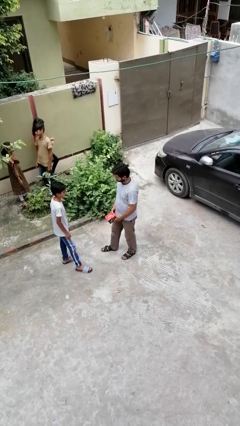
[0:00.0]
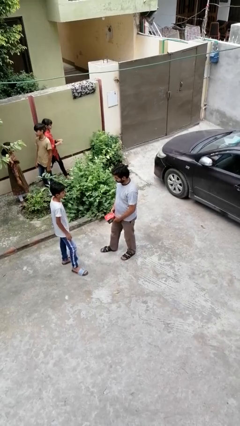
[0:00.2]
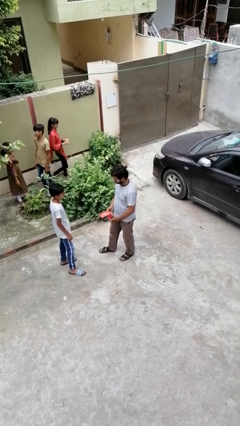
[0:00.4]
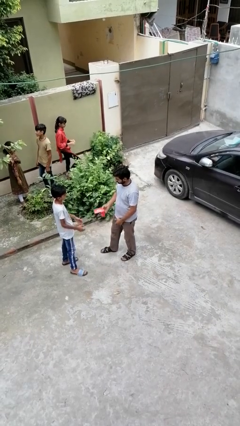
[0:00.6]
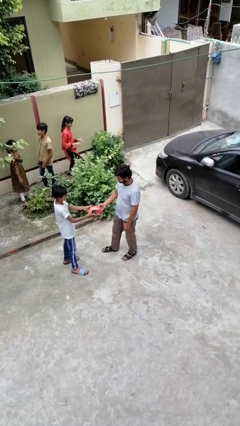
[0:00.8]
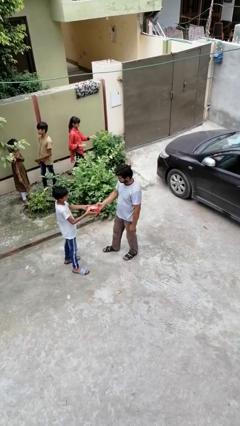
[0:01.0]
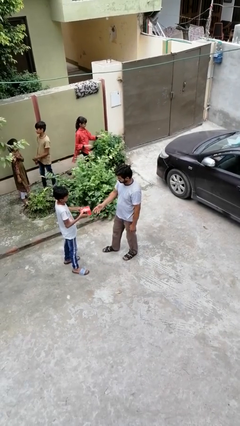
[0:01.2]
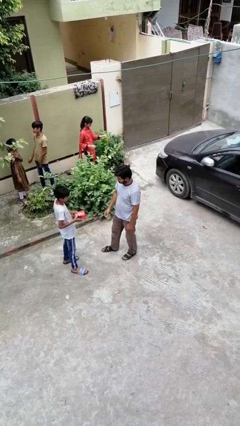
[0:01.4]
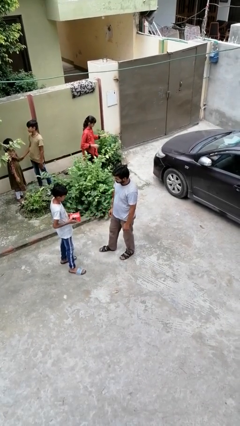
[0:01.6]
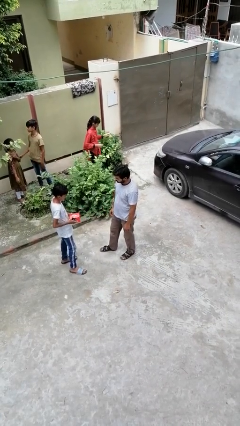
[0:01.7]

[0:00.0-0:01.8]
person transfers object to person

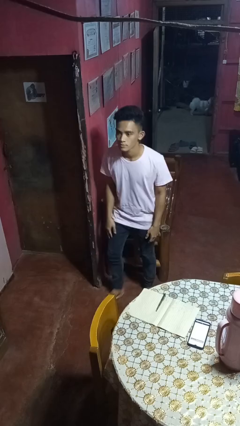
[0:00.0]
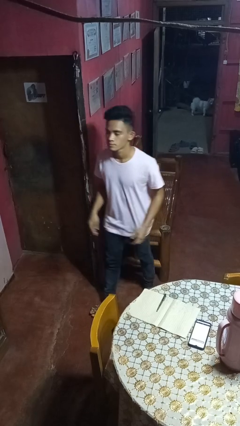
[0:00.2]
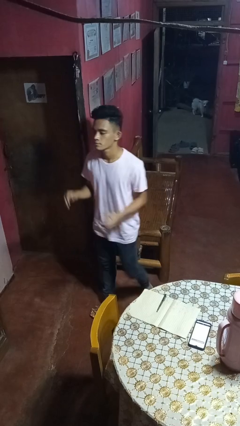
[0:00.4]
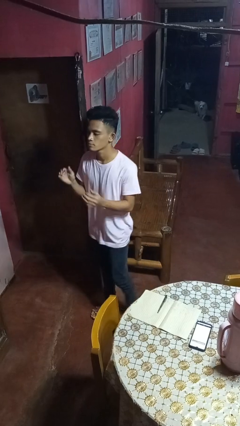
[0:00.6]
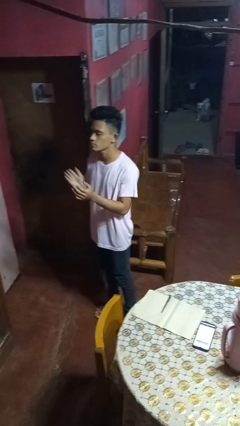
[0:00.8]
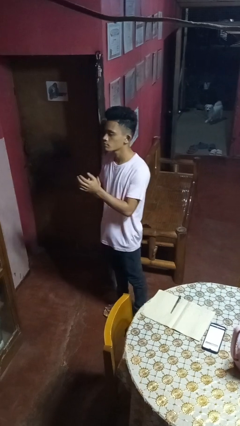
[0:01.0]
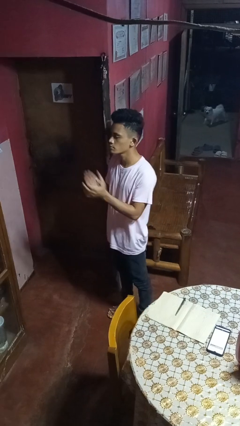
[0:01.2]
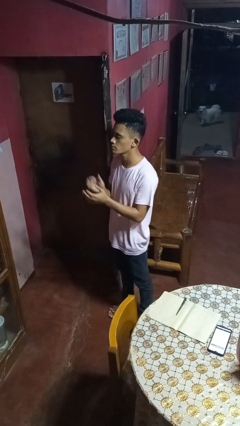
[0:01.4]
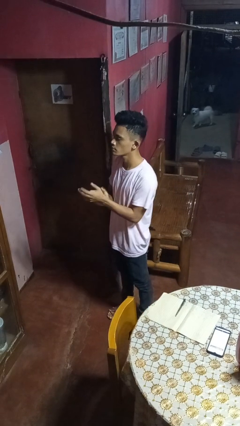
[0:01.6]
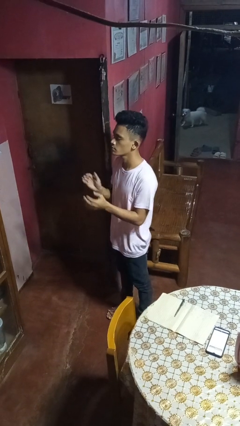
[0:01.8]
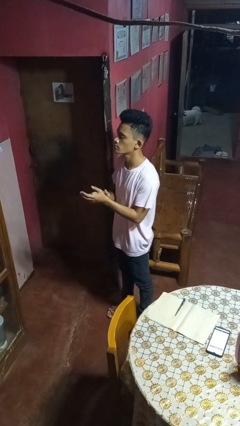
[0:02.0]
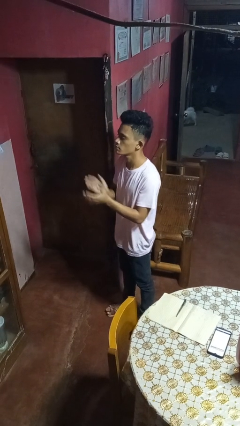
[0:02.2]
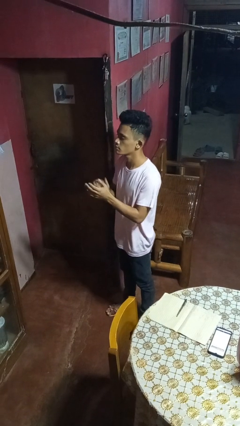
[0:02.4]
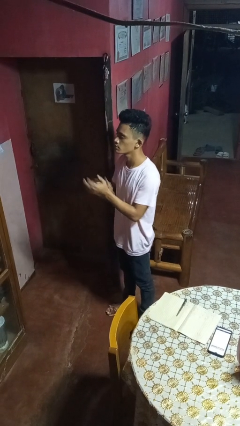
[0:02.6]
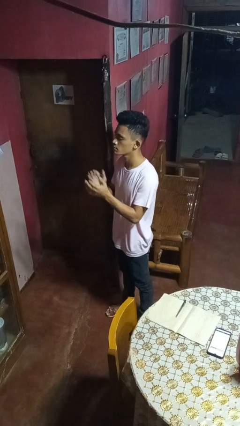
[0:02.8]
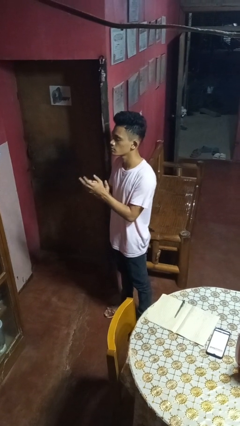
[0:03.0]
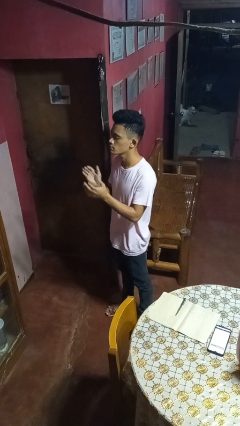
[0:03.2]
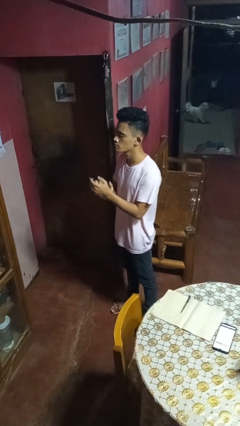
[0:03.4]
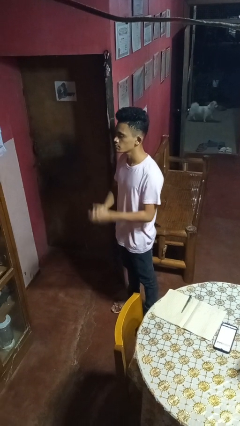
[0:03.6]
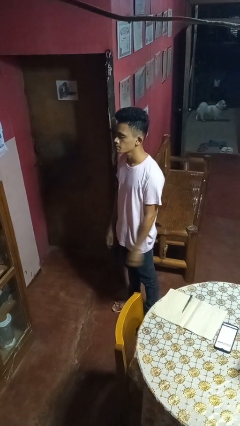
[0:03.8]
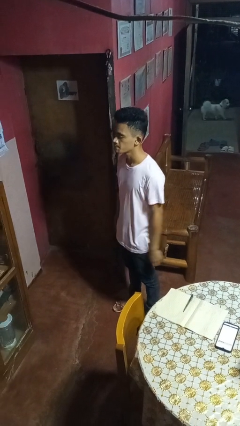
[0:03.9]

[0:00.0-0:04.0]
person claps hands

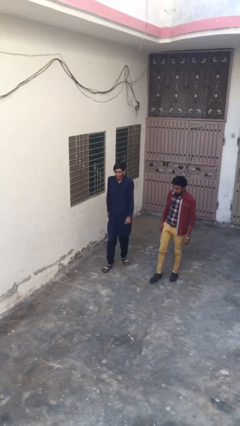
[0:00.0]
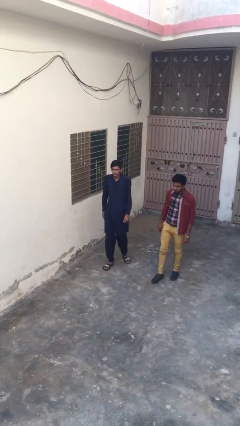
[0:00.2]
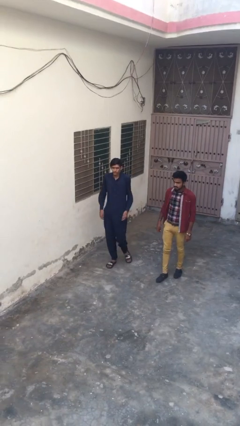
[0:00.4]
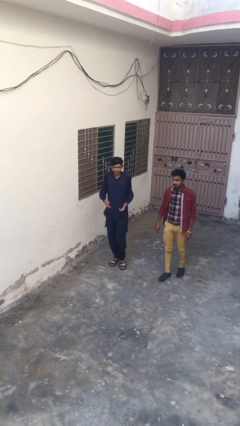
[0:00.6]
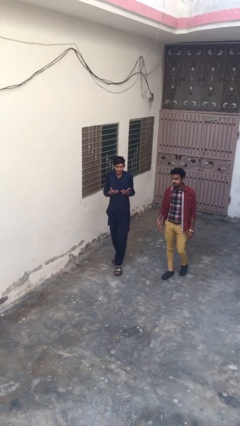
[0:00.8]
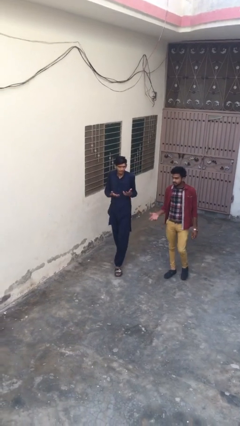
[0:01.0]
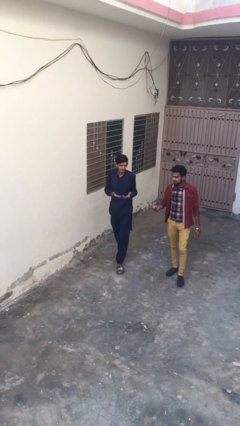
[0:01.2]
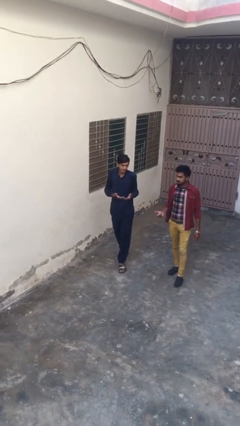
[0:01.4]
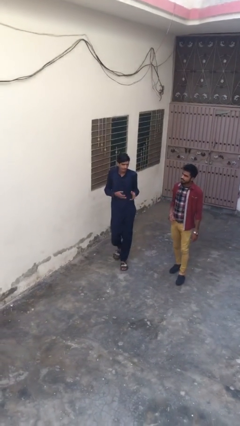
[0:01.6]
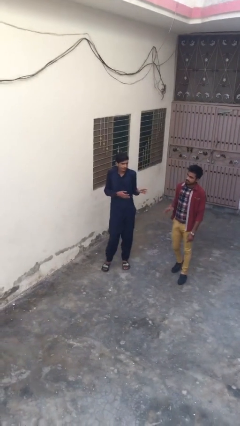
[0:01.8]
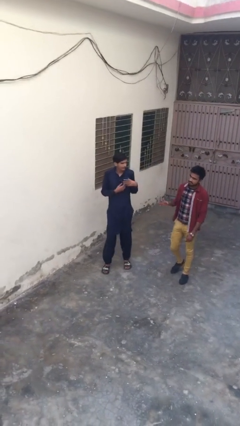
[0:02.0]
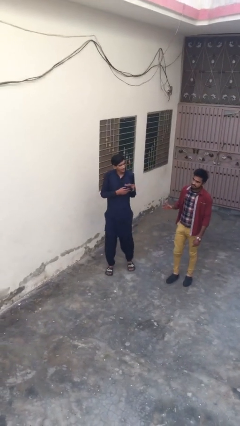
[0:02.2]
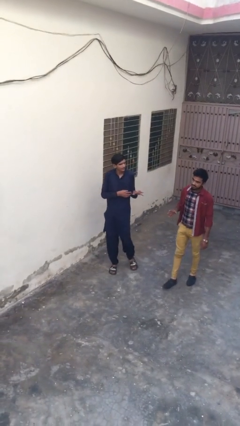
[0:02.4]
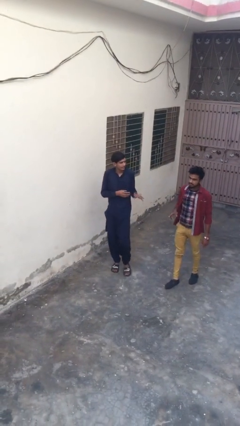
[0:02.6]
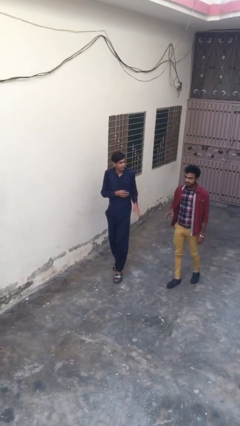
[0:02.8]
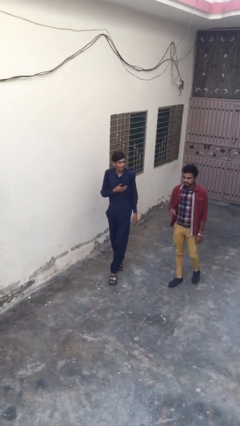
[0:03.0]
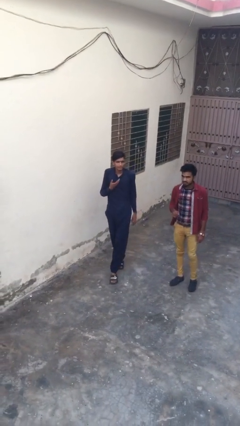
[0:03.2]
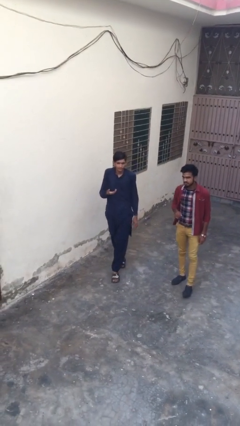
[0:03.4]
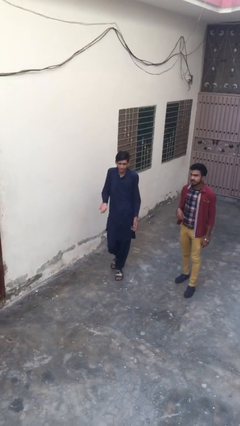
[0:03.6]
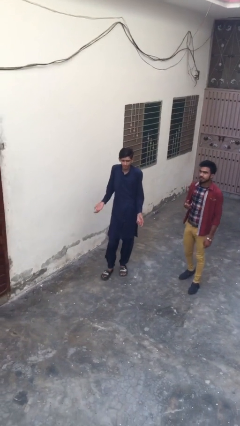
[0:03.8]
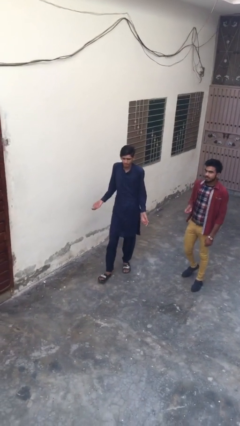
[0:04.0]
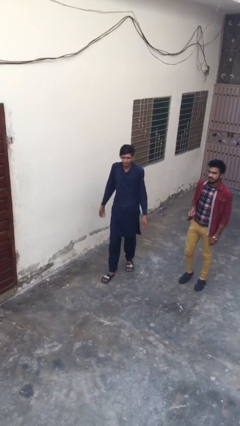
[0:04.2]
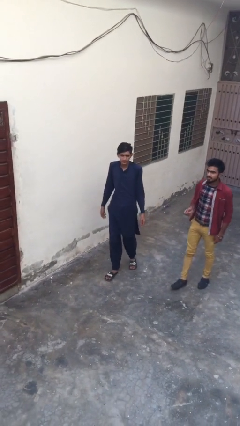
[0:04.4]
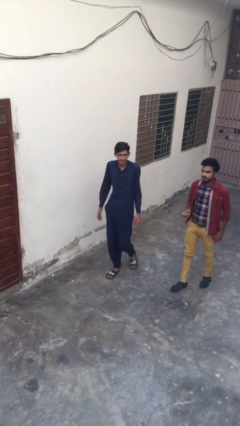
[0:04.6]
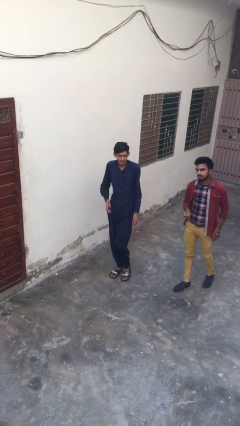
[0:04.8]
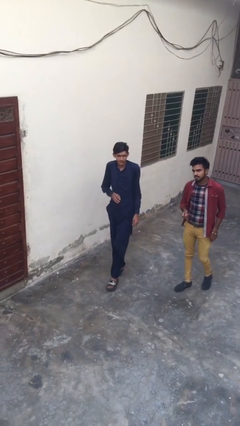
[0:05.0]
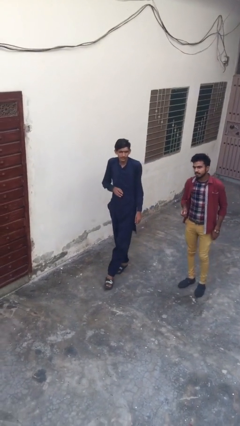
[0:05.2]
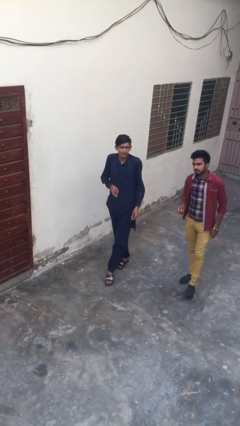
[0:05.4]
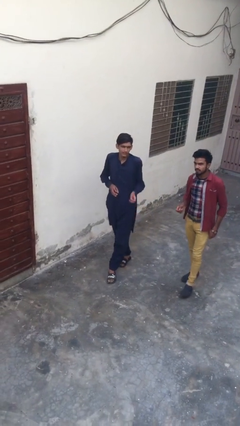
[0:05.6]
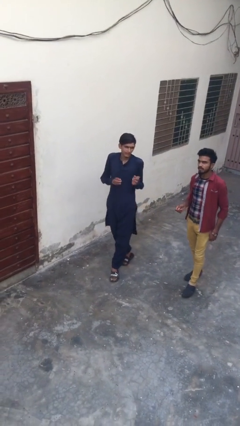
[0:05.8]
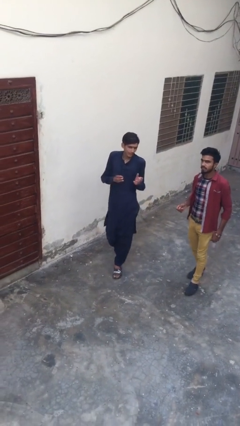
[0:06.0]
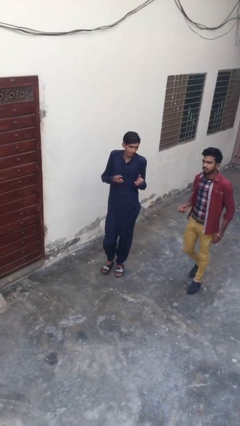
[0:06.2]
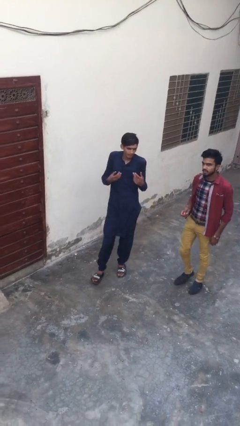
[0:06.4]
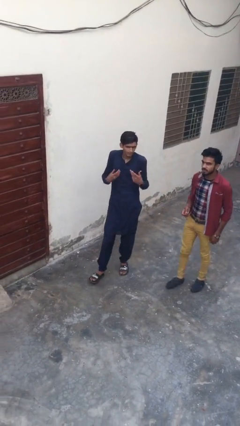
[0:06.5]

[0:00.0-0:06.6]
person talks to person

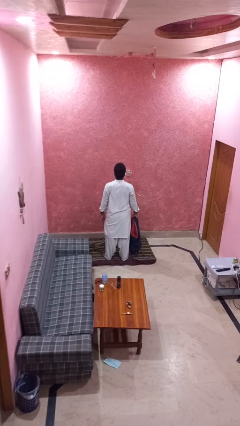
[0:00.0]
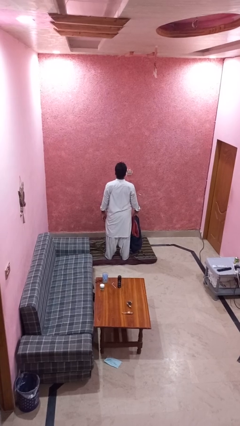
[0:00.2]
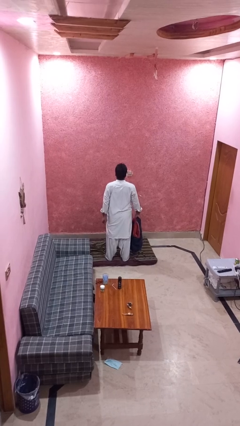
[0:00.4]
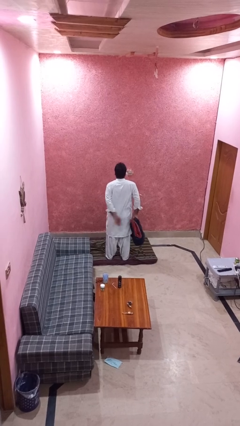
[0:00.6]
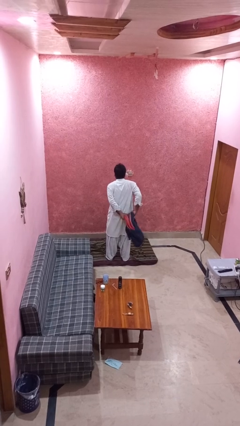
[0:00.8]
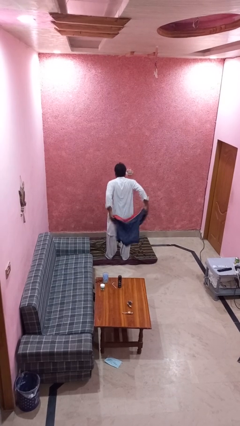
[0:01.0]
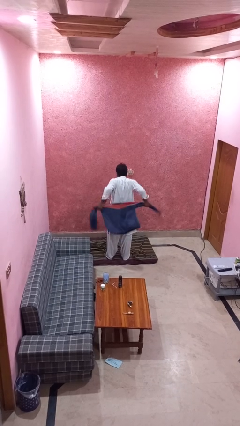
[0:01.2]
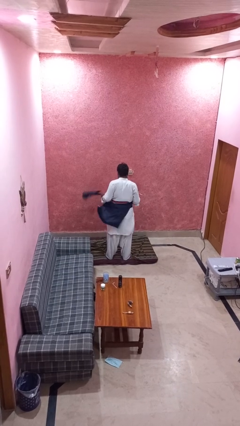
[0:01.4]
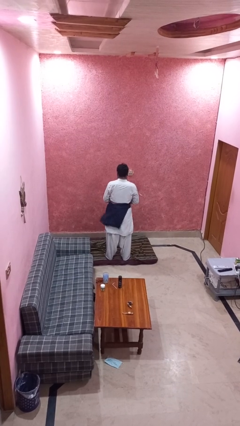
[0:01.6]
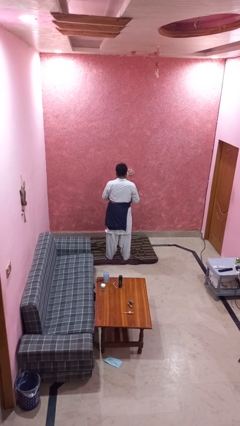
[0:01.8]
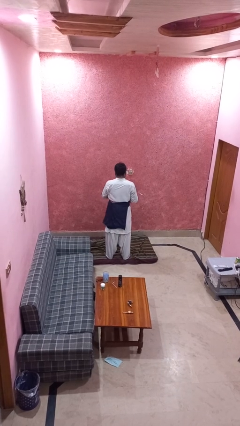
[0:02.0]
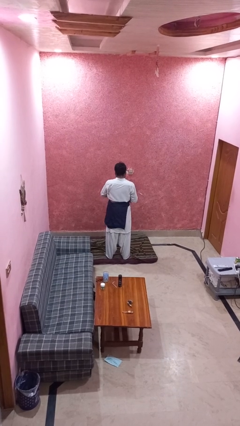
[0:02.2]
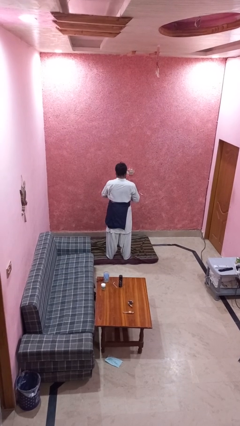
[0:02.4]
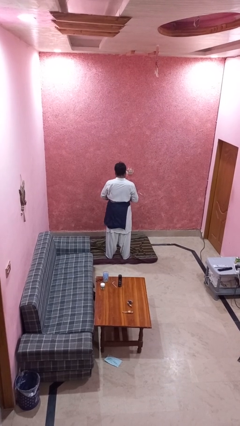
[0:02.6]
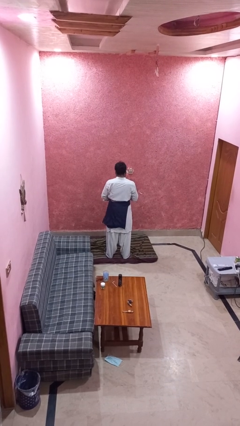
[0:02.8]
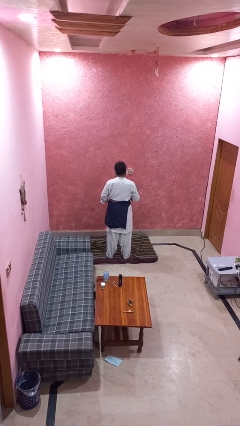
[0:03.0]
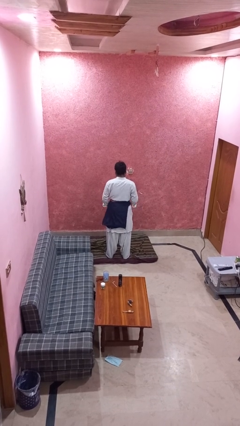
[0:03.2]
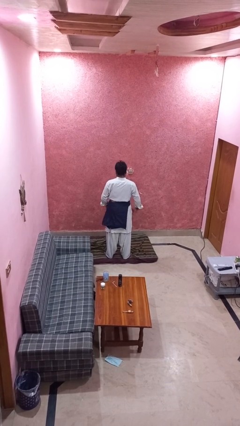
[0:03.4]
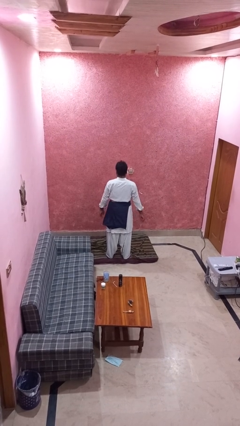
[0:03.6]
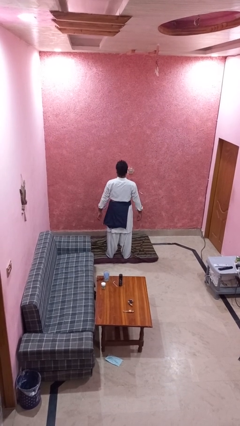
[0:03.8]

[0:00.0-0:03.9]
person ties jacket around waist

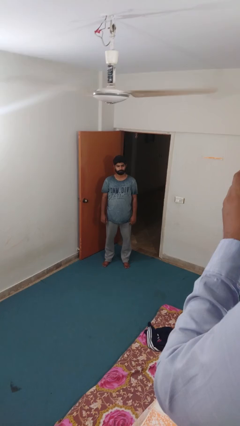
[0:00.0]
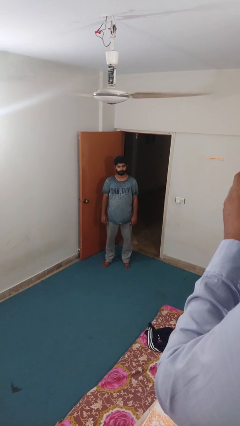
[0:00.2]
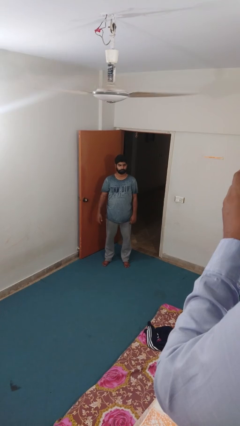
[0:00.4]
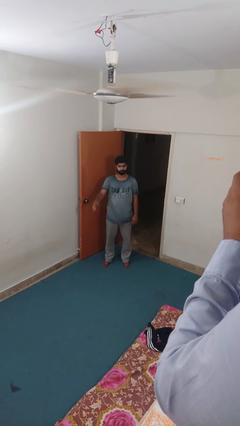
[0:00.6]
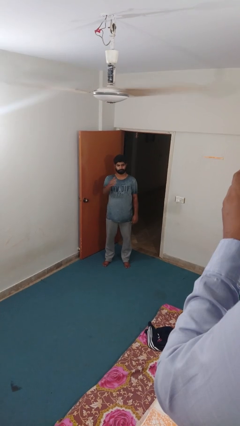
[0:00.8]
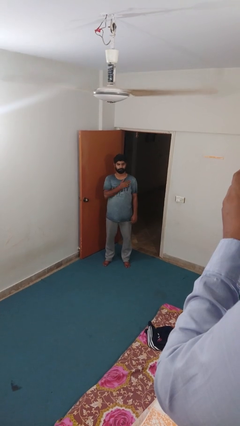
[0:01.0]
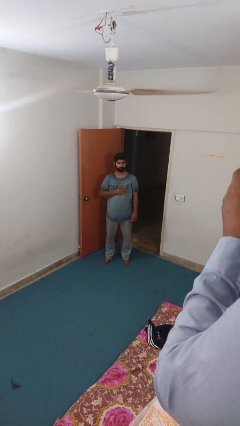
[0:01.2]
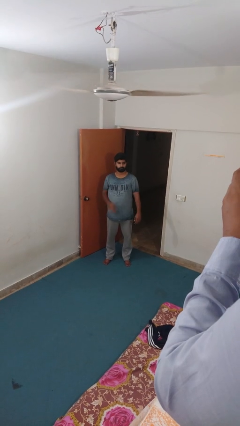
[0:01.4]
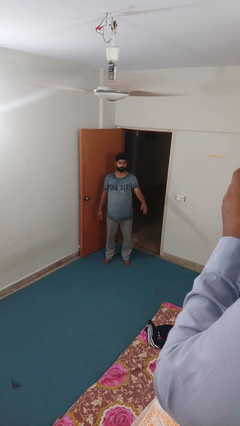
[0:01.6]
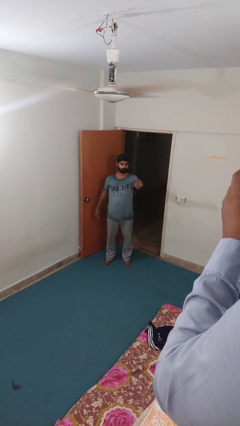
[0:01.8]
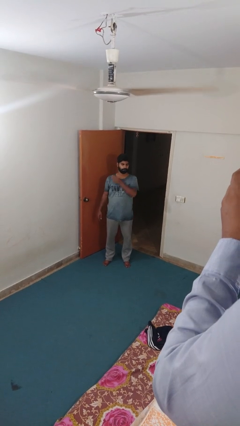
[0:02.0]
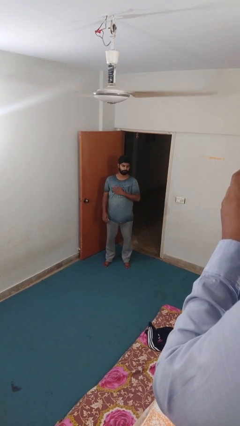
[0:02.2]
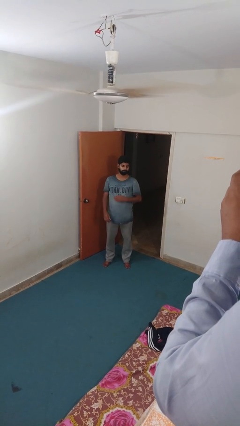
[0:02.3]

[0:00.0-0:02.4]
person drums on chest
